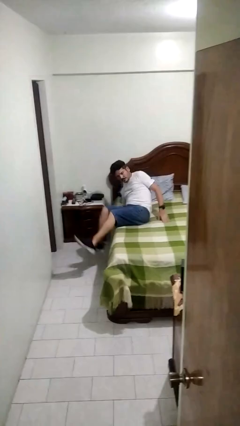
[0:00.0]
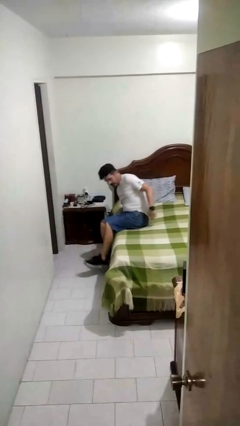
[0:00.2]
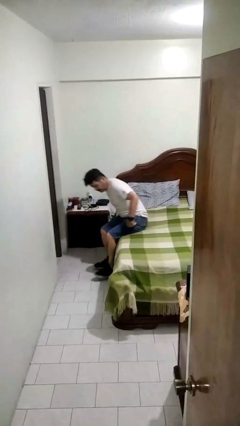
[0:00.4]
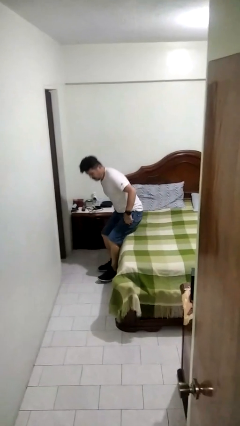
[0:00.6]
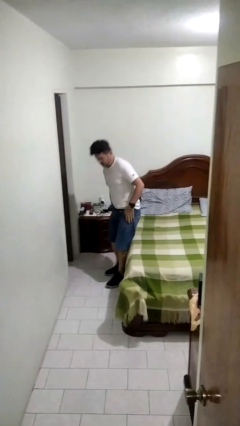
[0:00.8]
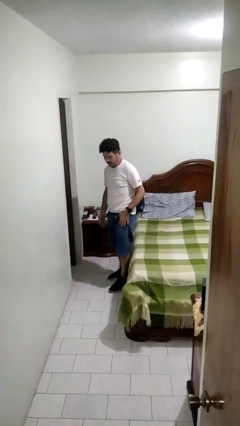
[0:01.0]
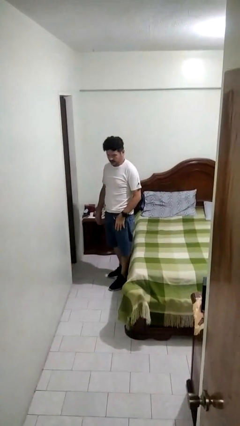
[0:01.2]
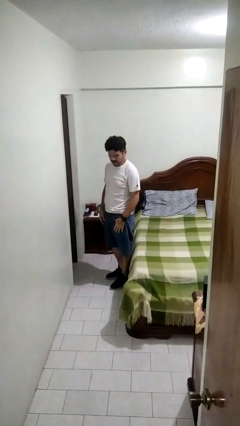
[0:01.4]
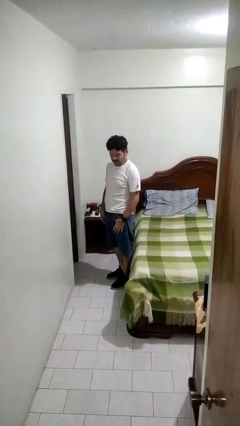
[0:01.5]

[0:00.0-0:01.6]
person stands up

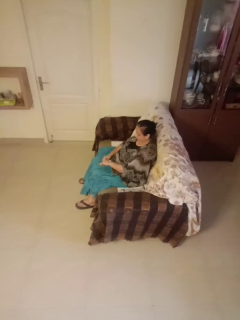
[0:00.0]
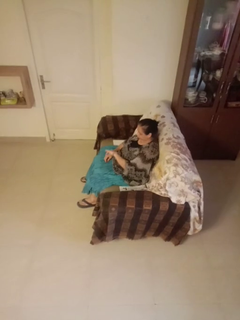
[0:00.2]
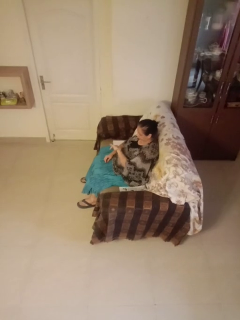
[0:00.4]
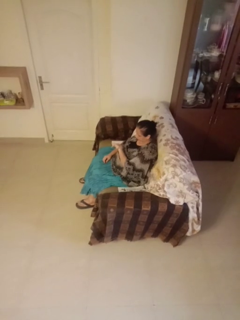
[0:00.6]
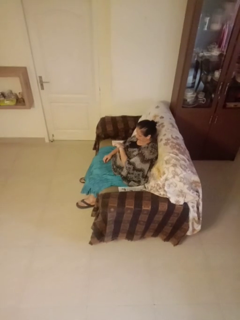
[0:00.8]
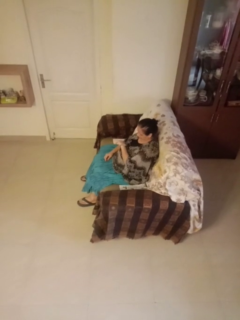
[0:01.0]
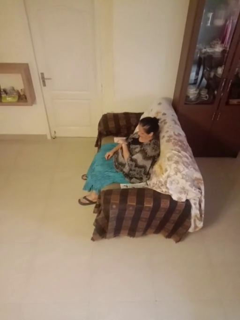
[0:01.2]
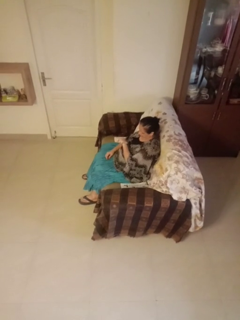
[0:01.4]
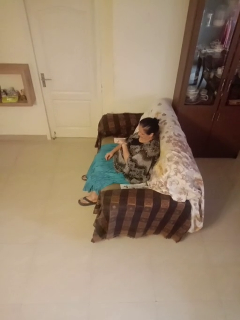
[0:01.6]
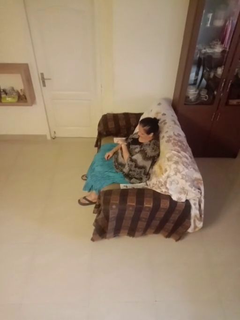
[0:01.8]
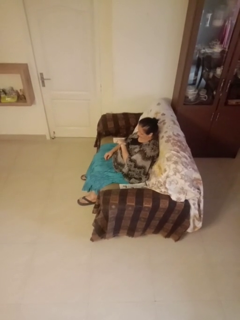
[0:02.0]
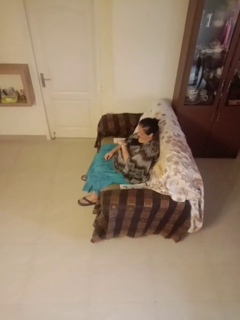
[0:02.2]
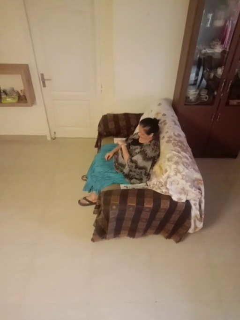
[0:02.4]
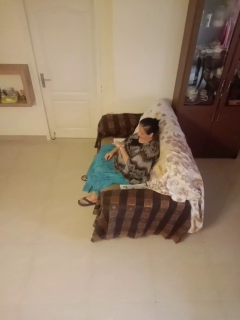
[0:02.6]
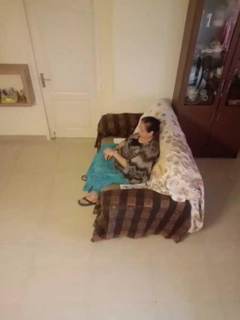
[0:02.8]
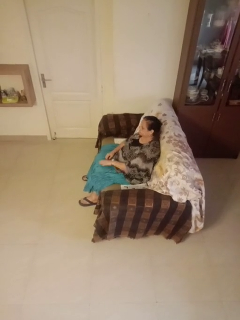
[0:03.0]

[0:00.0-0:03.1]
person looks at wristwatch

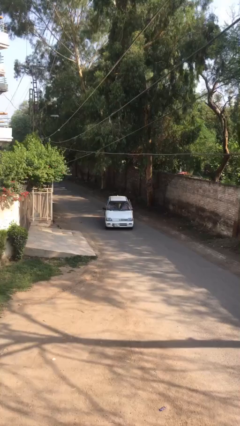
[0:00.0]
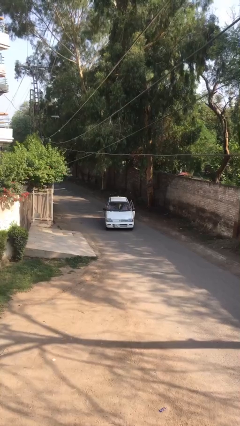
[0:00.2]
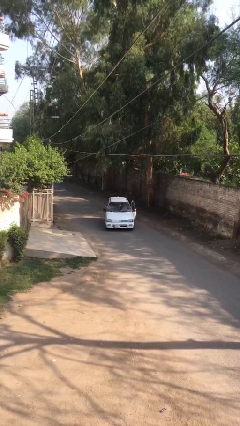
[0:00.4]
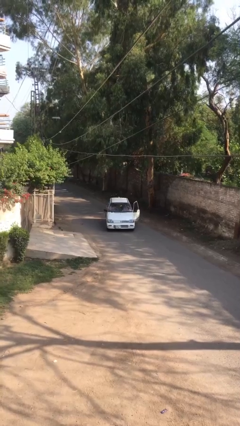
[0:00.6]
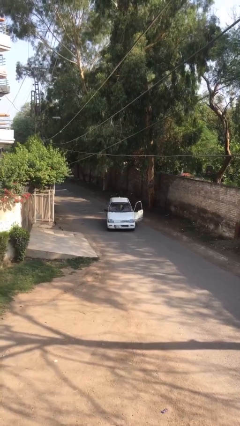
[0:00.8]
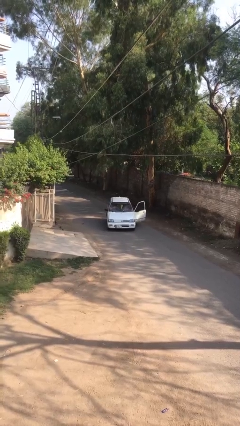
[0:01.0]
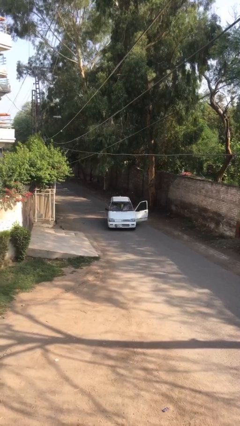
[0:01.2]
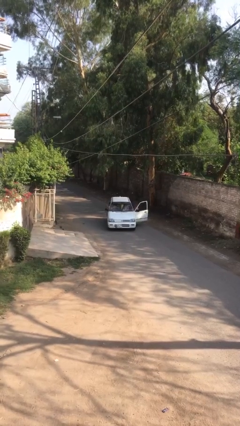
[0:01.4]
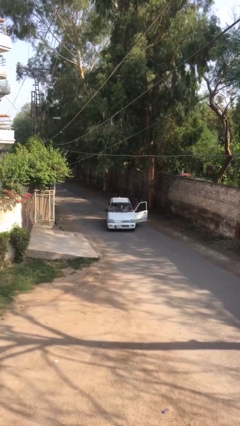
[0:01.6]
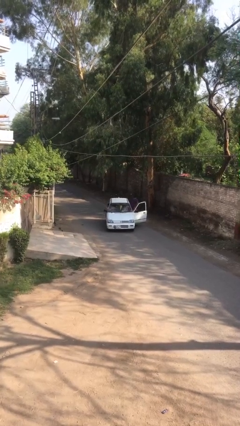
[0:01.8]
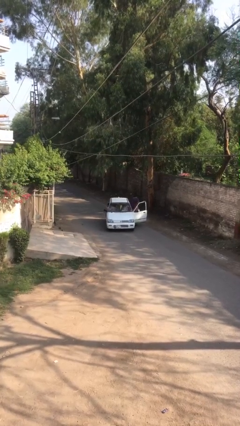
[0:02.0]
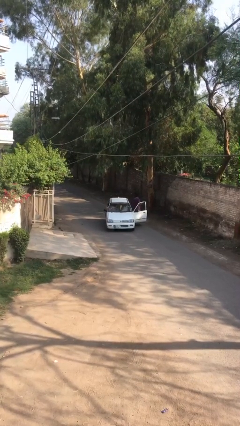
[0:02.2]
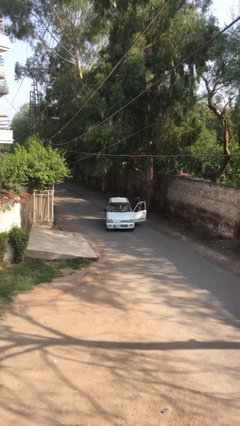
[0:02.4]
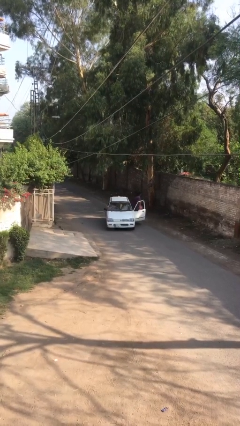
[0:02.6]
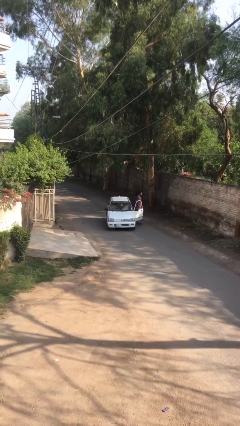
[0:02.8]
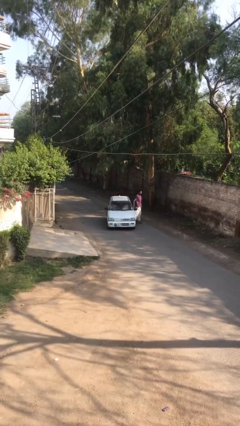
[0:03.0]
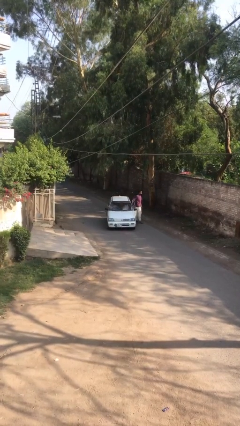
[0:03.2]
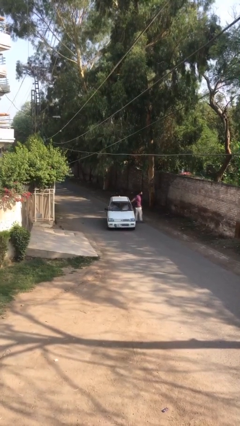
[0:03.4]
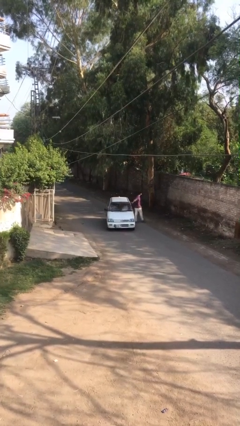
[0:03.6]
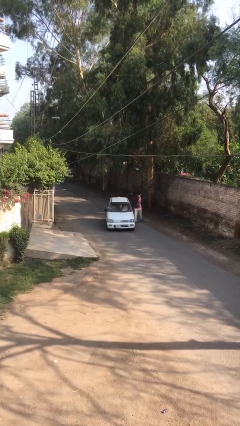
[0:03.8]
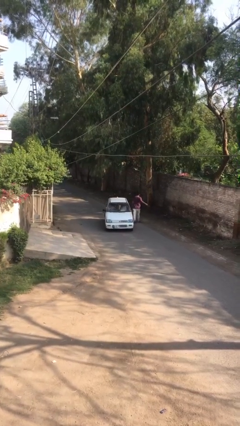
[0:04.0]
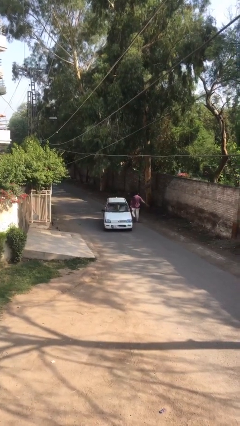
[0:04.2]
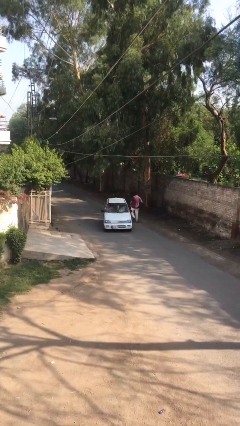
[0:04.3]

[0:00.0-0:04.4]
car drops off person

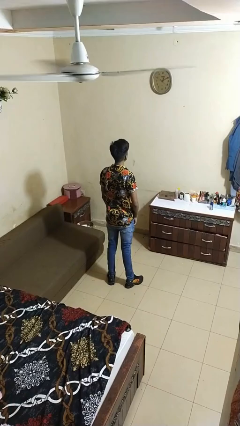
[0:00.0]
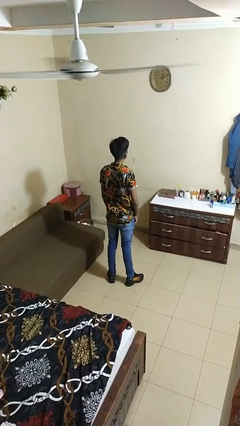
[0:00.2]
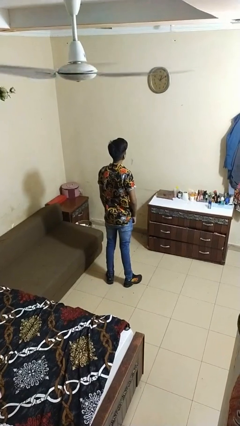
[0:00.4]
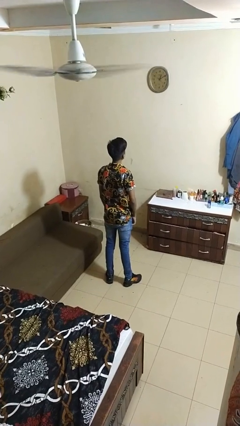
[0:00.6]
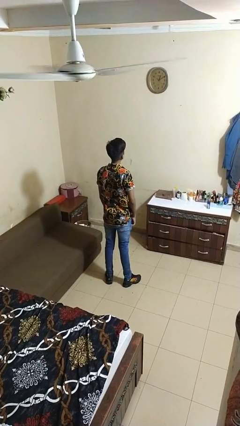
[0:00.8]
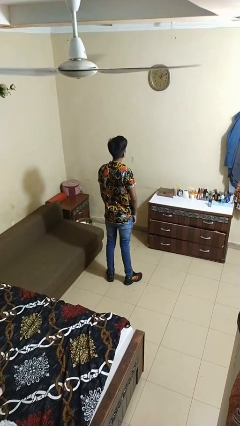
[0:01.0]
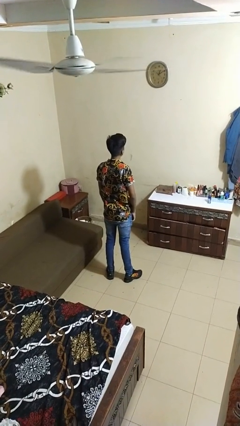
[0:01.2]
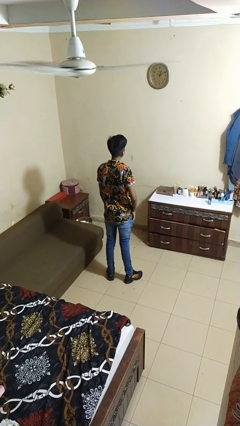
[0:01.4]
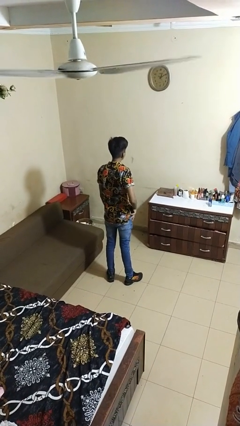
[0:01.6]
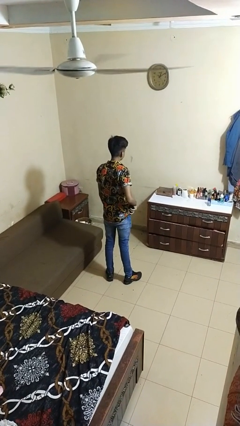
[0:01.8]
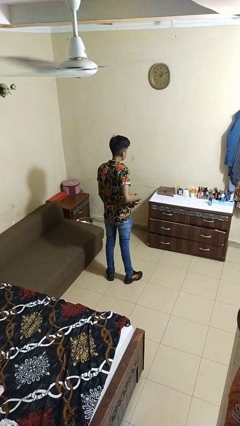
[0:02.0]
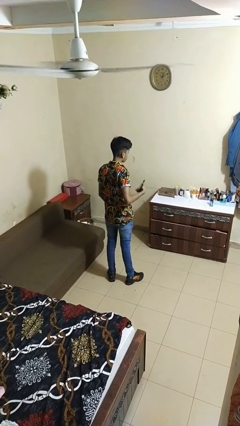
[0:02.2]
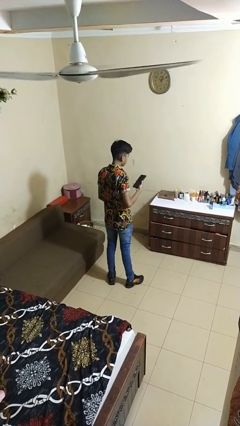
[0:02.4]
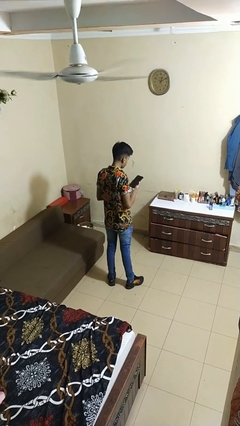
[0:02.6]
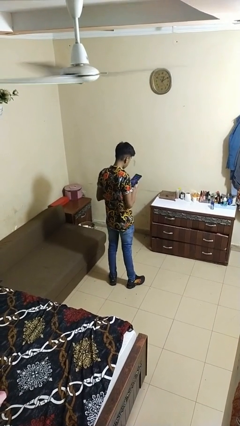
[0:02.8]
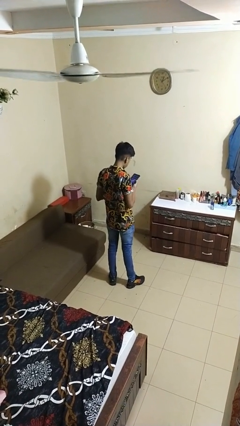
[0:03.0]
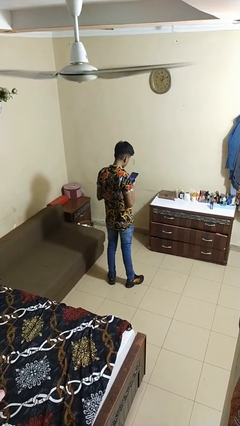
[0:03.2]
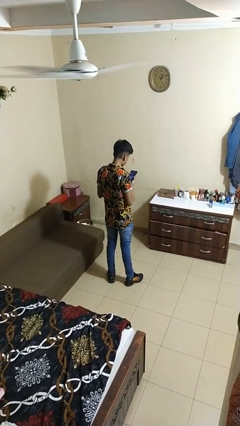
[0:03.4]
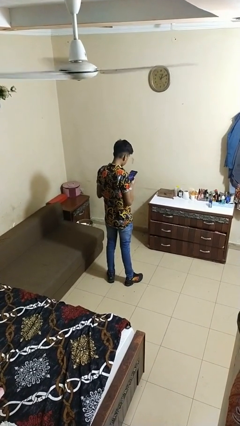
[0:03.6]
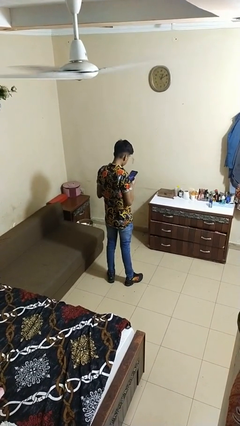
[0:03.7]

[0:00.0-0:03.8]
person takes phone from pocket

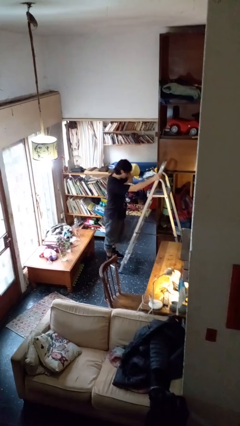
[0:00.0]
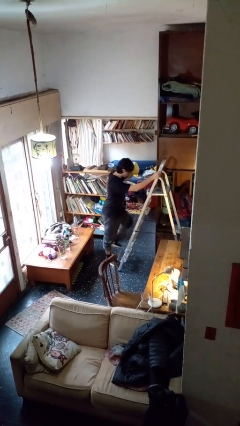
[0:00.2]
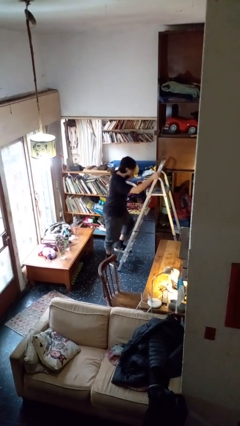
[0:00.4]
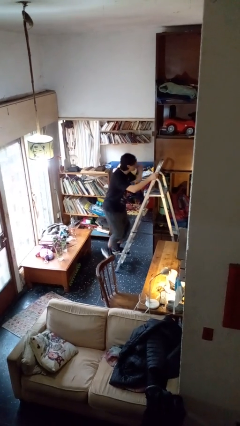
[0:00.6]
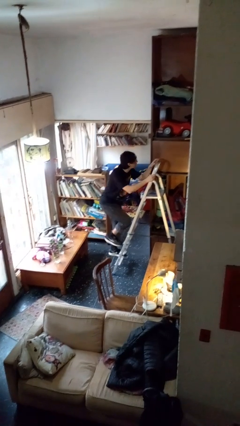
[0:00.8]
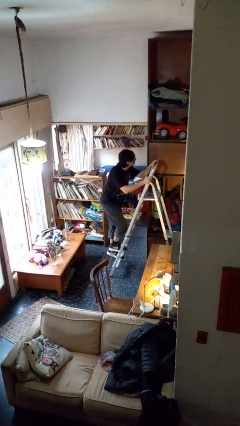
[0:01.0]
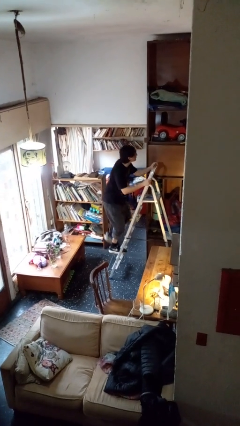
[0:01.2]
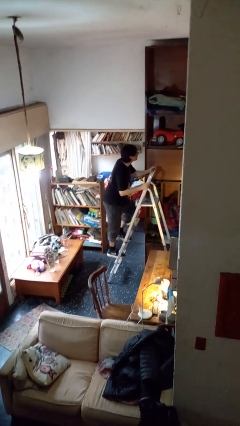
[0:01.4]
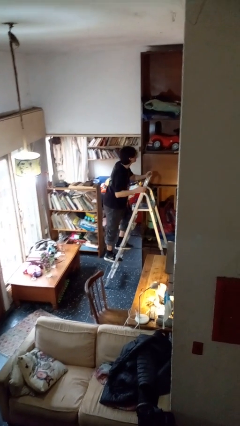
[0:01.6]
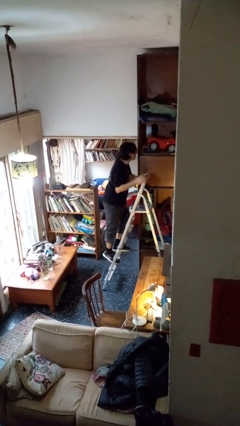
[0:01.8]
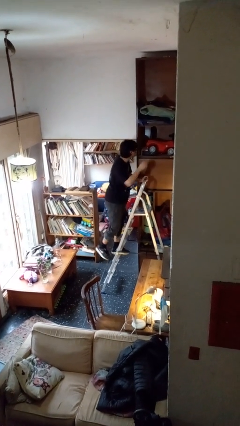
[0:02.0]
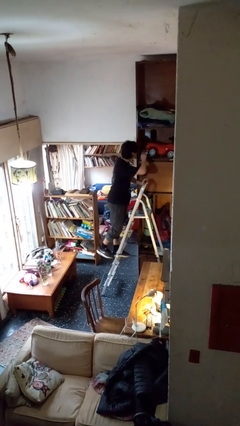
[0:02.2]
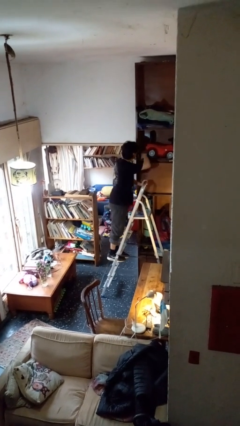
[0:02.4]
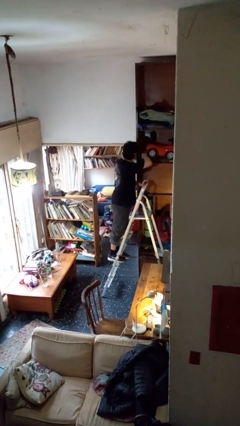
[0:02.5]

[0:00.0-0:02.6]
person climbs up ladder

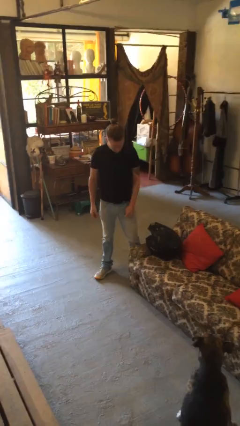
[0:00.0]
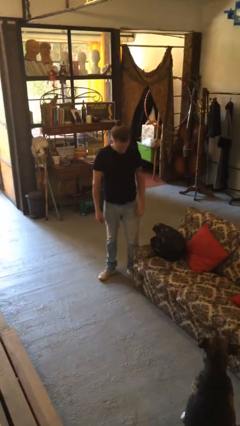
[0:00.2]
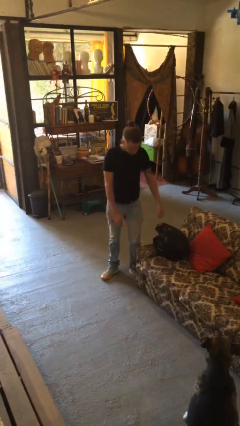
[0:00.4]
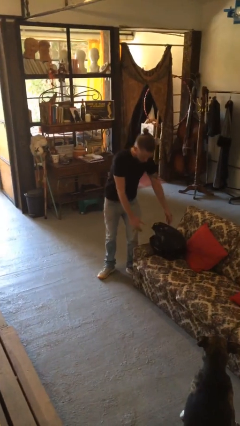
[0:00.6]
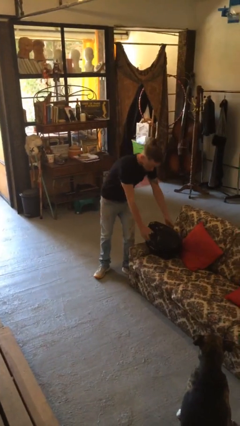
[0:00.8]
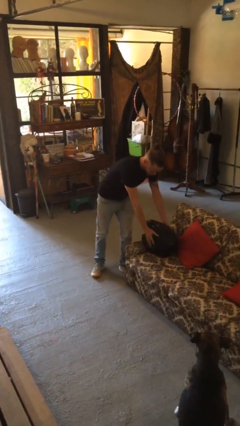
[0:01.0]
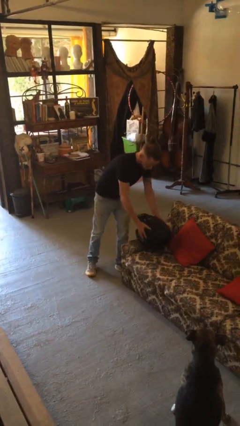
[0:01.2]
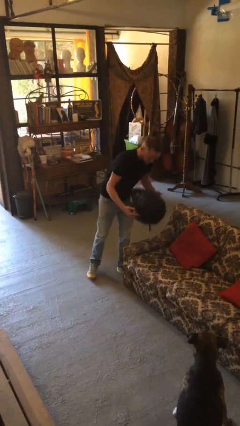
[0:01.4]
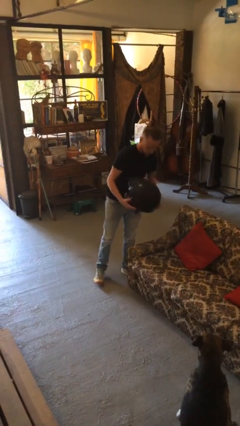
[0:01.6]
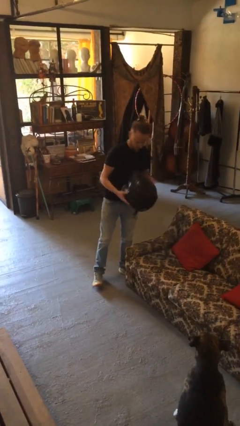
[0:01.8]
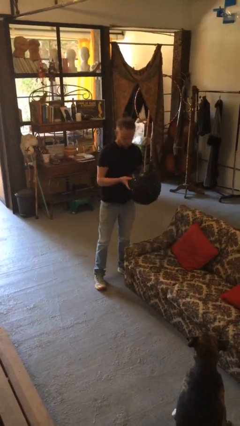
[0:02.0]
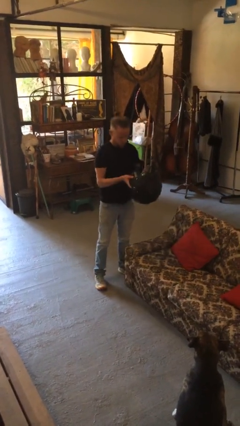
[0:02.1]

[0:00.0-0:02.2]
person picks up object from couch

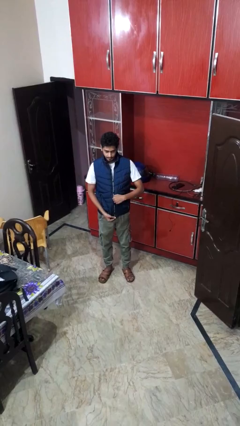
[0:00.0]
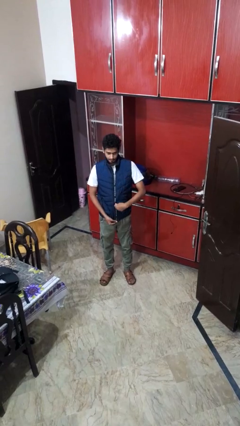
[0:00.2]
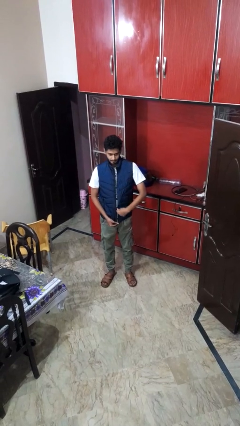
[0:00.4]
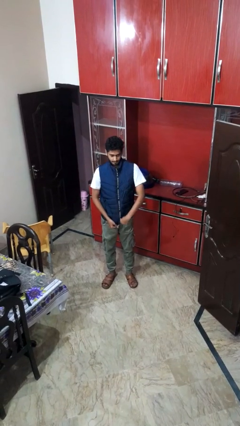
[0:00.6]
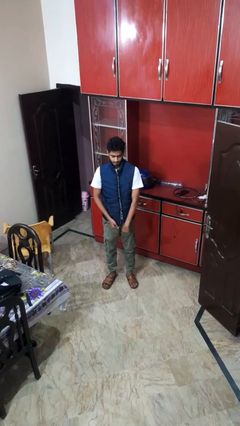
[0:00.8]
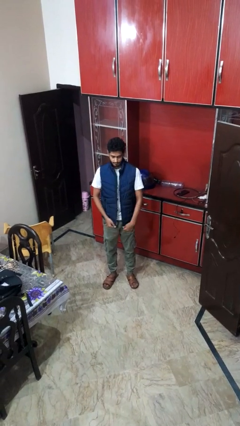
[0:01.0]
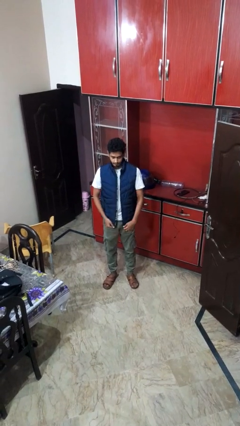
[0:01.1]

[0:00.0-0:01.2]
person unzips jacket
